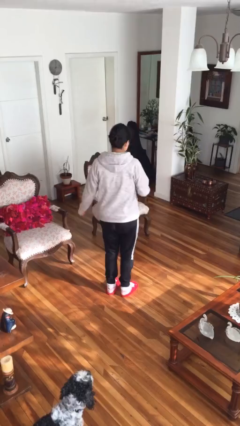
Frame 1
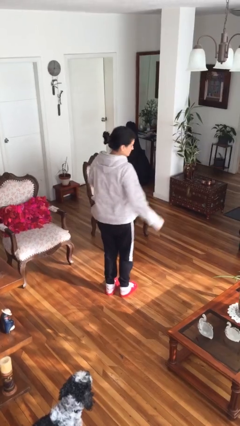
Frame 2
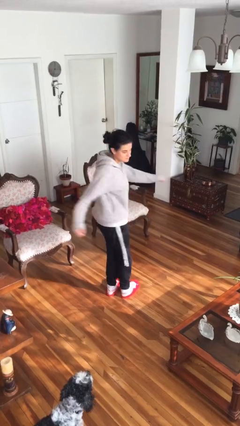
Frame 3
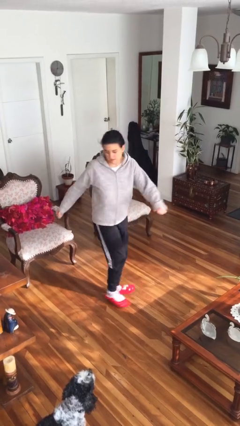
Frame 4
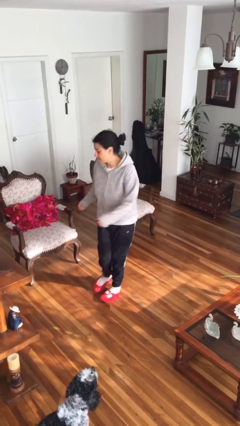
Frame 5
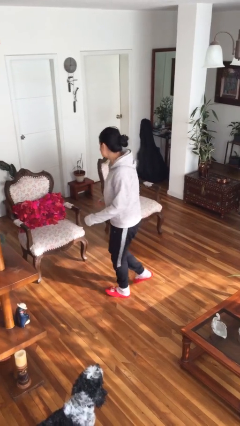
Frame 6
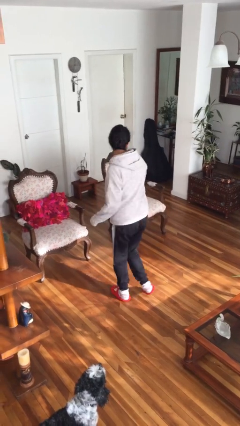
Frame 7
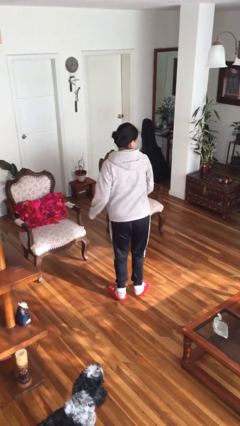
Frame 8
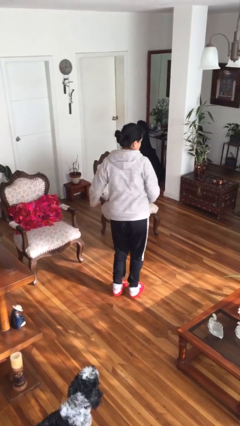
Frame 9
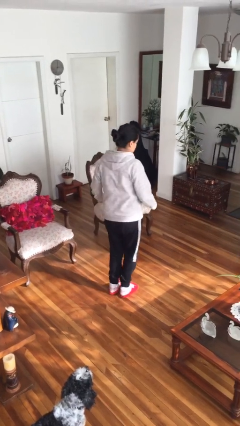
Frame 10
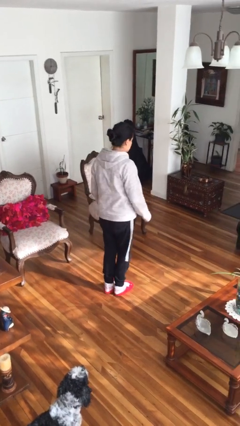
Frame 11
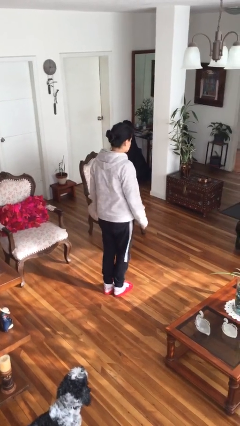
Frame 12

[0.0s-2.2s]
person twirls

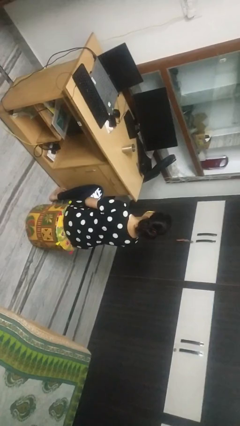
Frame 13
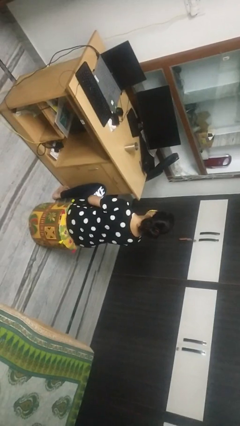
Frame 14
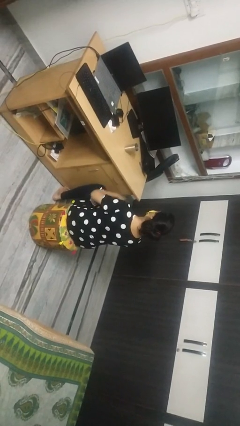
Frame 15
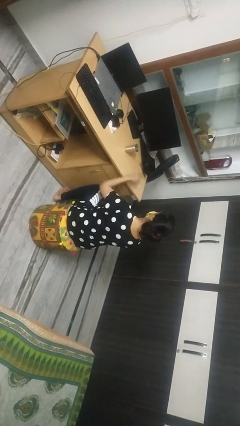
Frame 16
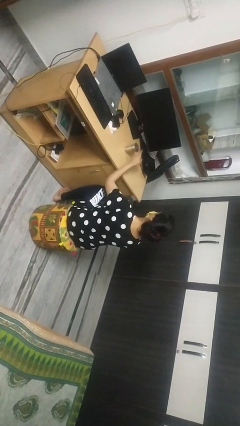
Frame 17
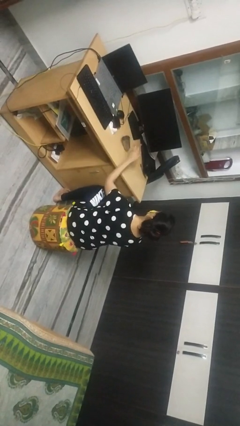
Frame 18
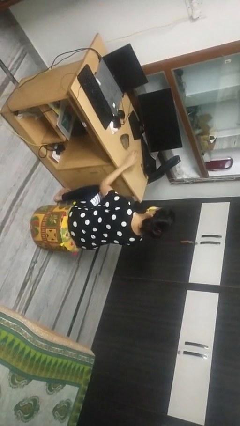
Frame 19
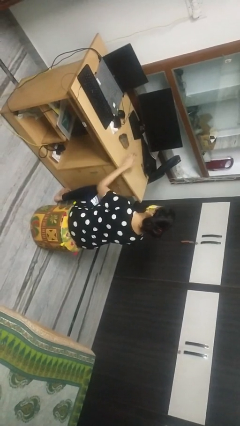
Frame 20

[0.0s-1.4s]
person knocks over glass

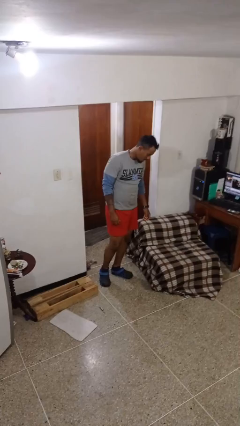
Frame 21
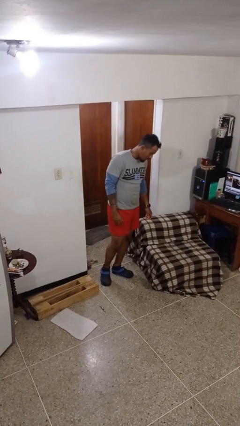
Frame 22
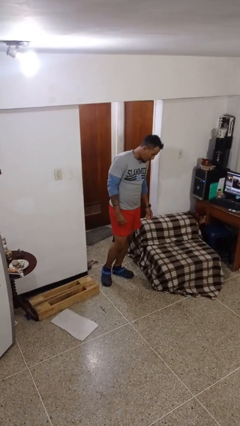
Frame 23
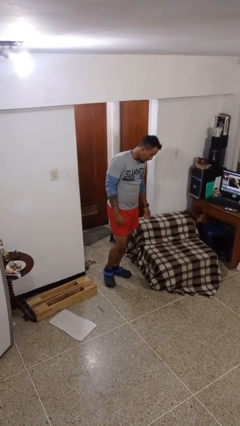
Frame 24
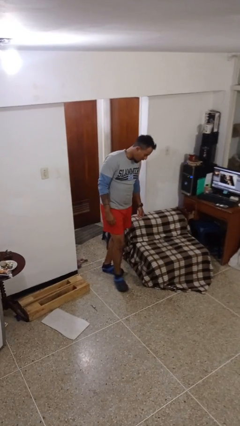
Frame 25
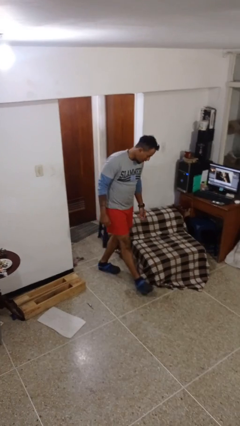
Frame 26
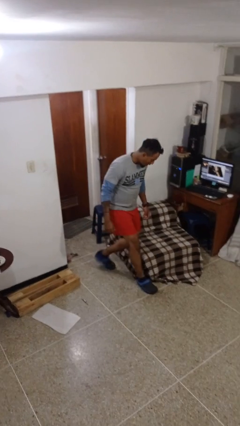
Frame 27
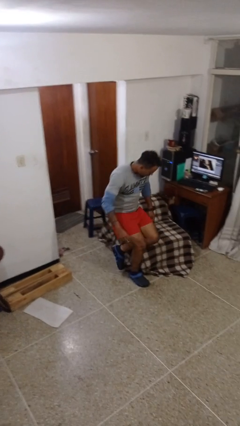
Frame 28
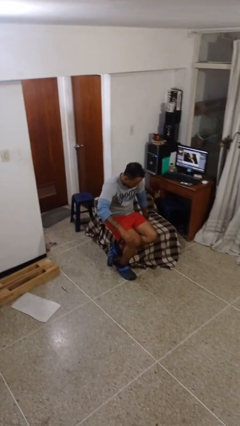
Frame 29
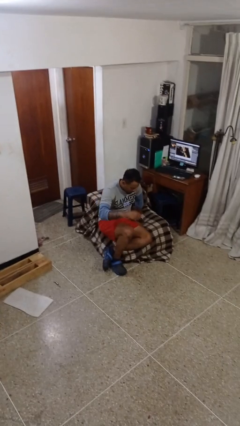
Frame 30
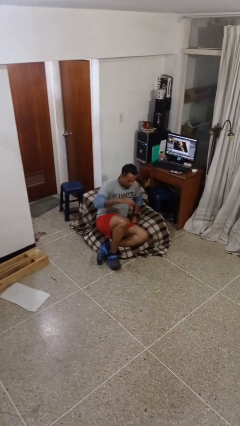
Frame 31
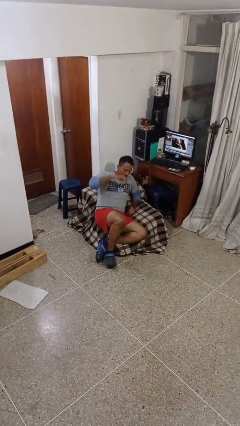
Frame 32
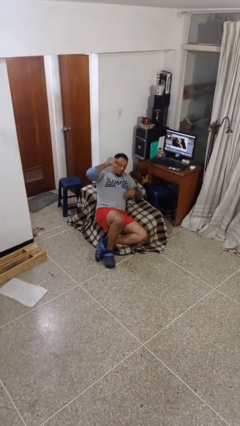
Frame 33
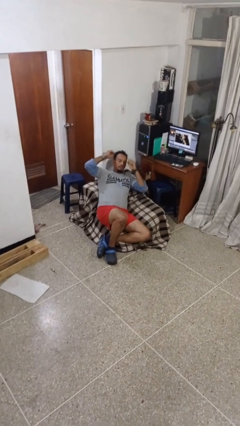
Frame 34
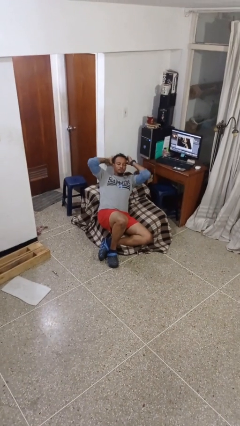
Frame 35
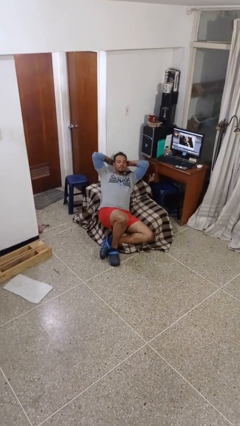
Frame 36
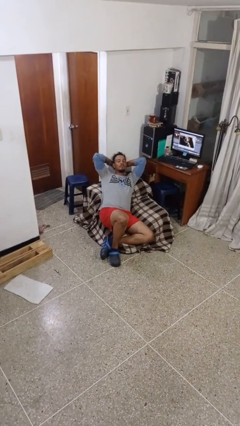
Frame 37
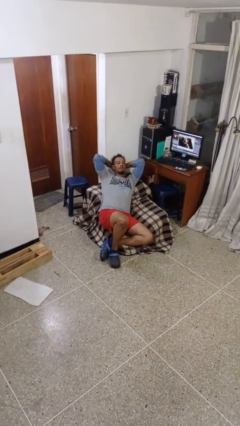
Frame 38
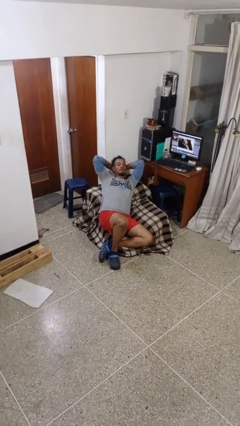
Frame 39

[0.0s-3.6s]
person lies down on couch

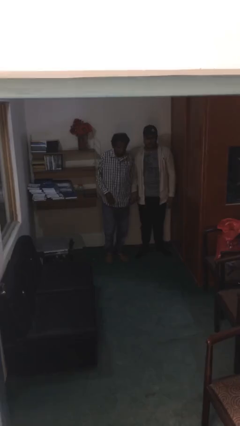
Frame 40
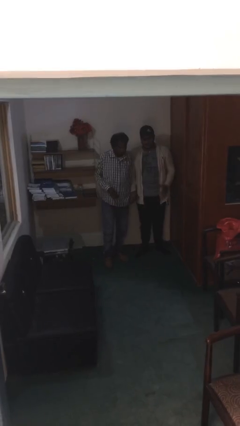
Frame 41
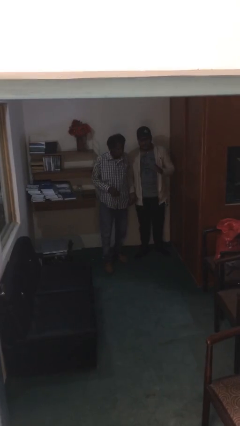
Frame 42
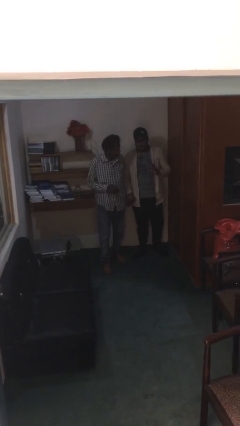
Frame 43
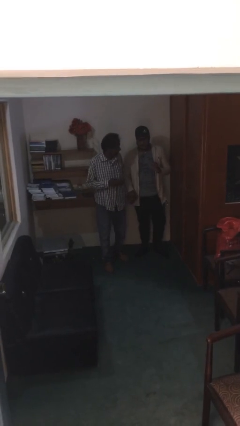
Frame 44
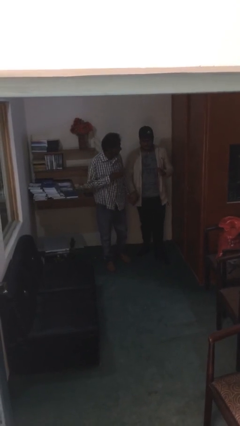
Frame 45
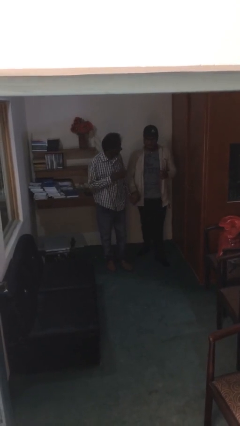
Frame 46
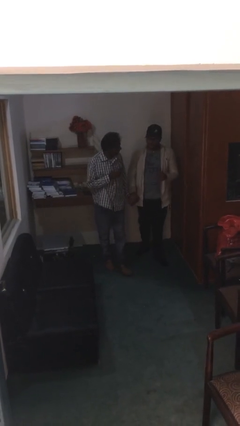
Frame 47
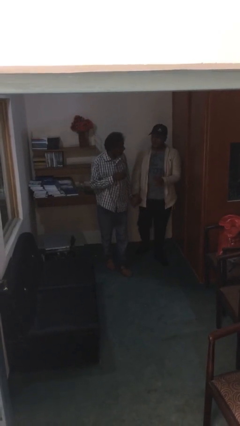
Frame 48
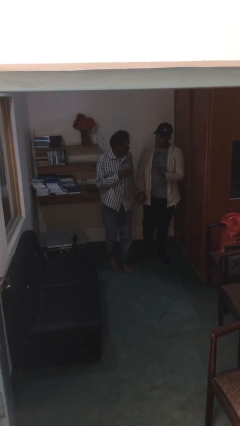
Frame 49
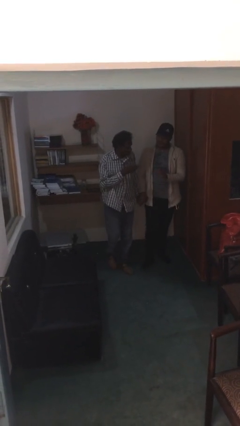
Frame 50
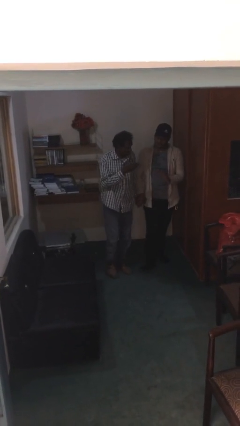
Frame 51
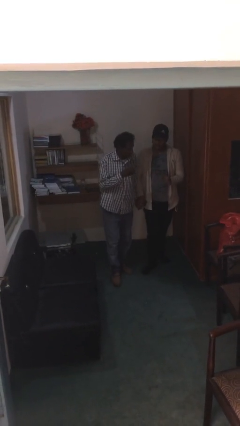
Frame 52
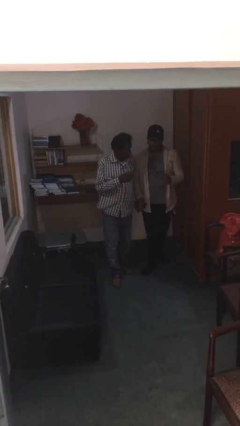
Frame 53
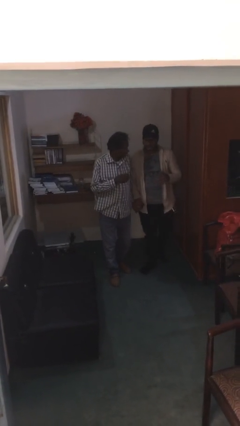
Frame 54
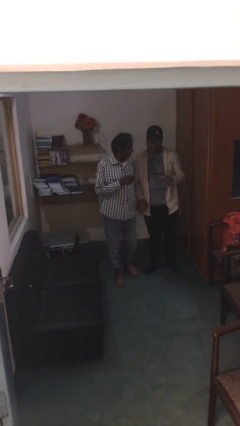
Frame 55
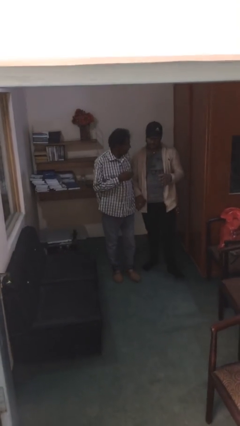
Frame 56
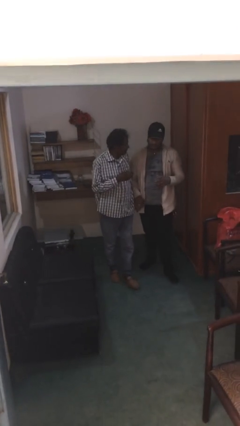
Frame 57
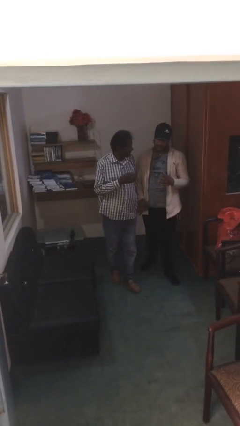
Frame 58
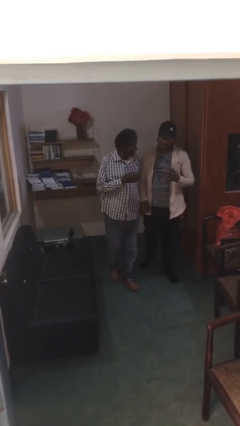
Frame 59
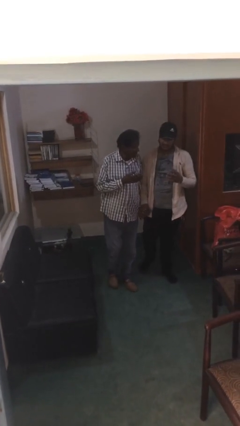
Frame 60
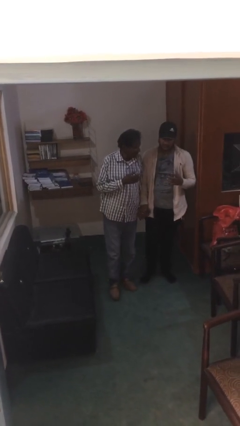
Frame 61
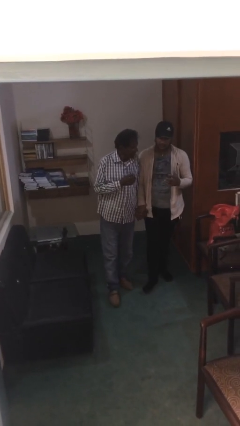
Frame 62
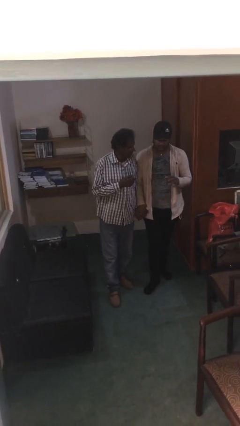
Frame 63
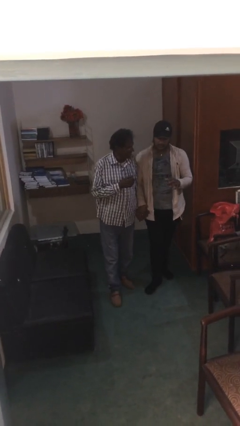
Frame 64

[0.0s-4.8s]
person holds hand

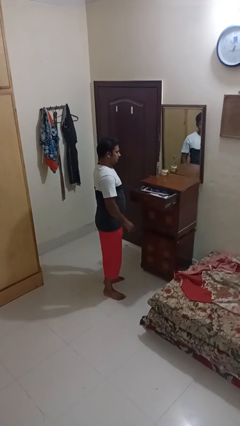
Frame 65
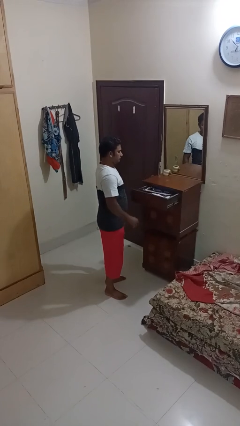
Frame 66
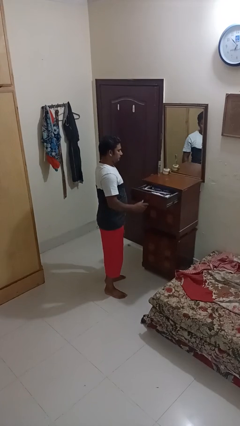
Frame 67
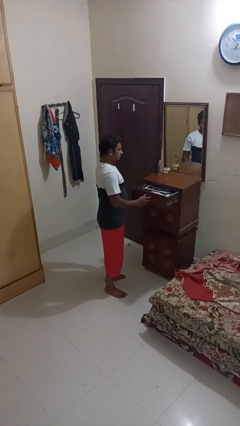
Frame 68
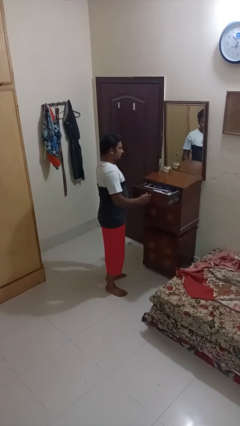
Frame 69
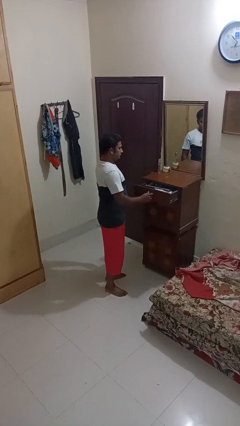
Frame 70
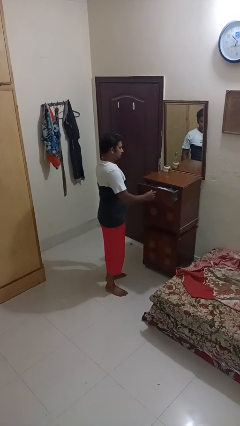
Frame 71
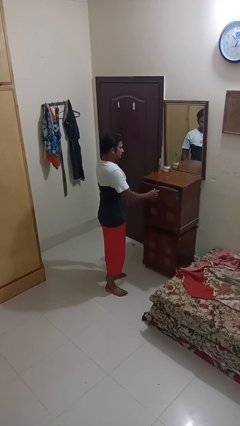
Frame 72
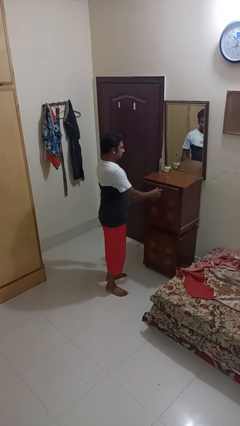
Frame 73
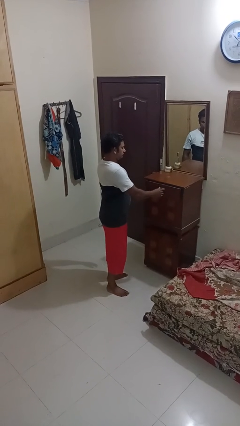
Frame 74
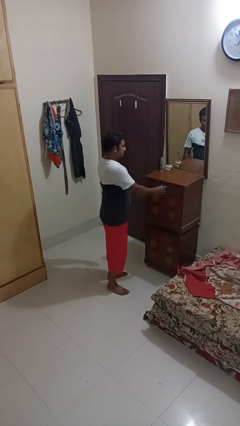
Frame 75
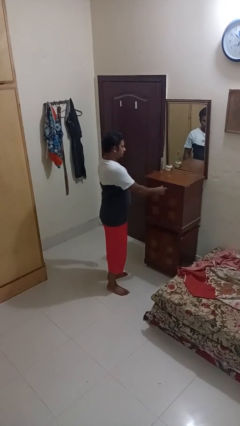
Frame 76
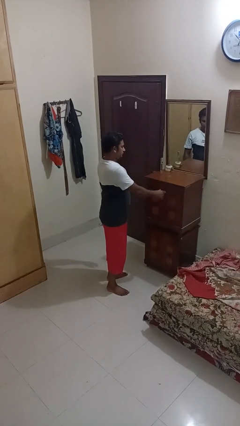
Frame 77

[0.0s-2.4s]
person closes dresser drawer

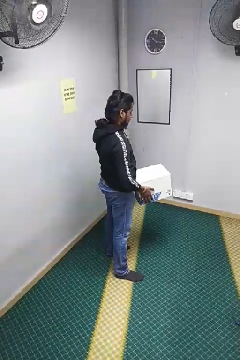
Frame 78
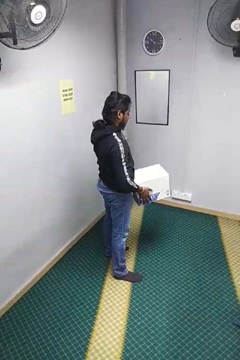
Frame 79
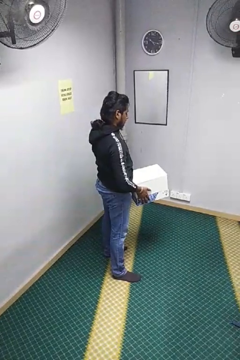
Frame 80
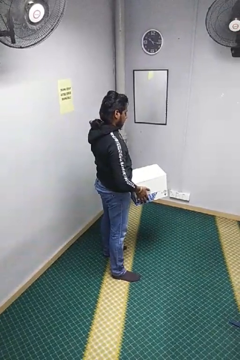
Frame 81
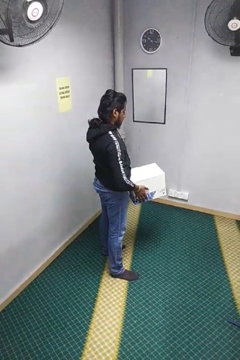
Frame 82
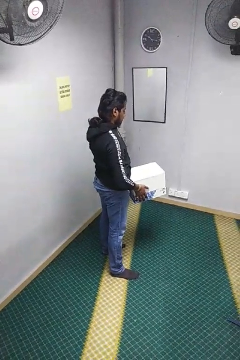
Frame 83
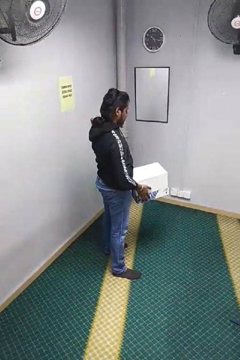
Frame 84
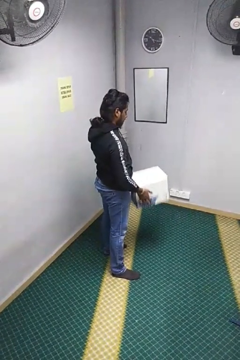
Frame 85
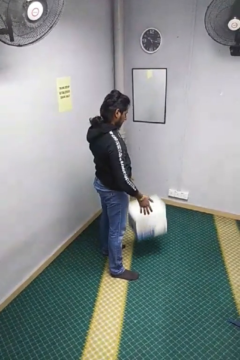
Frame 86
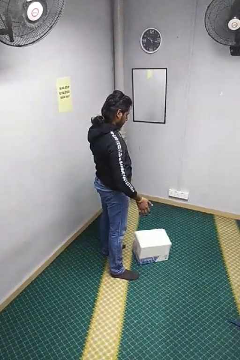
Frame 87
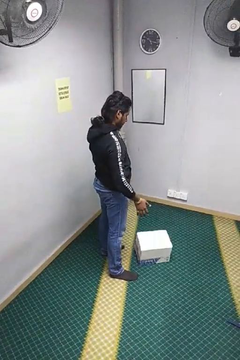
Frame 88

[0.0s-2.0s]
person drops object

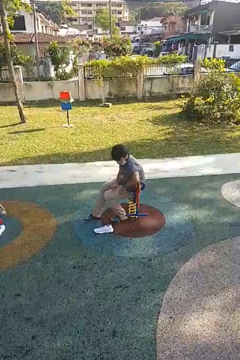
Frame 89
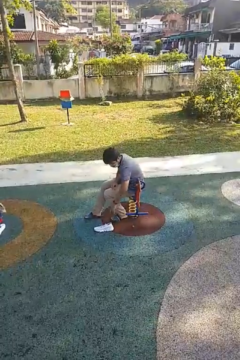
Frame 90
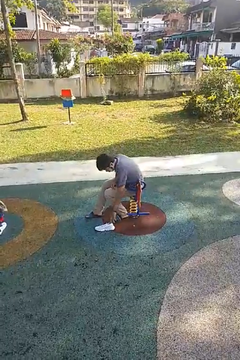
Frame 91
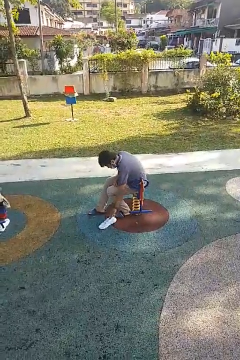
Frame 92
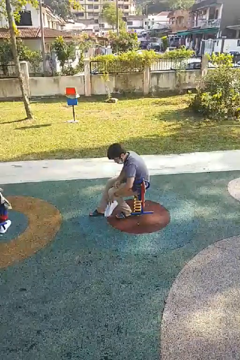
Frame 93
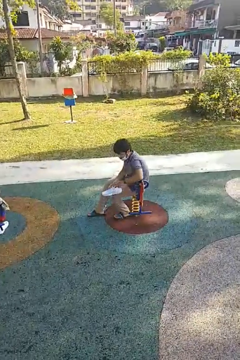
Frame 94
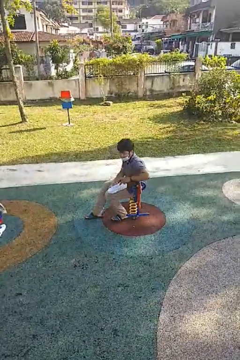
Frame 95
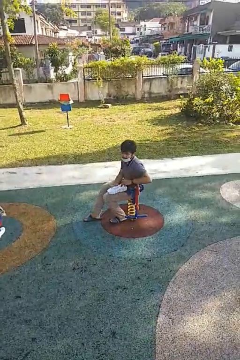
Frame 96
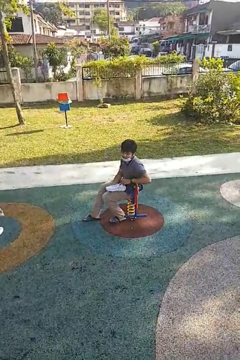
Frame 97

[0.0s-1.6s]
person picks up object from floor
